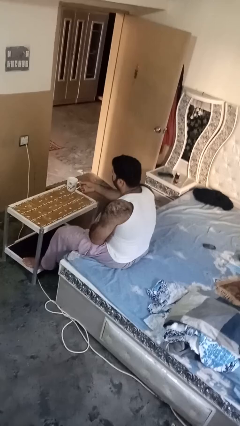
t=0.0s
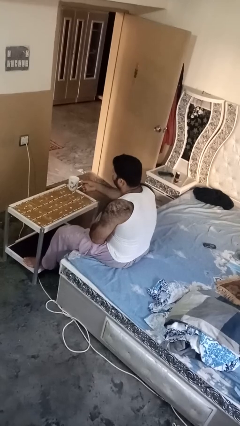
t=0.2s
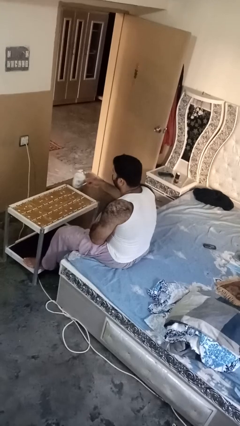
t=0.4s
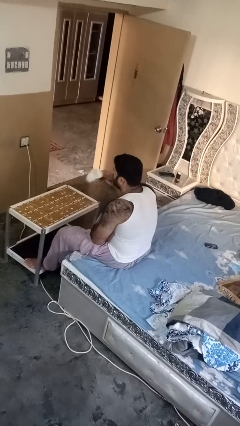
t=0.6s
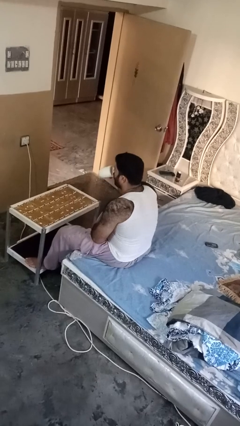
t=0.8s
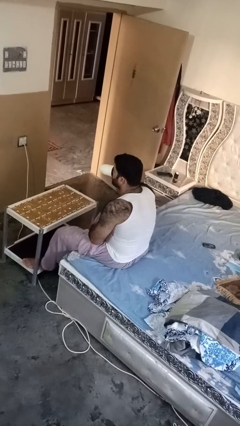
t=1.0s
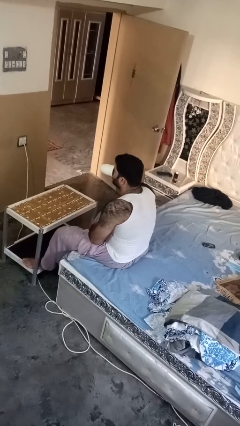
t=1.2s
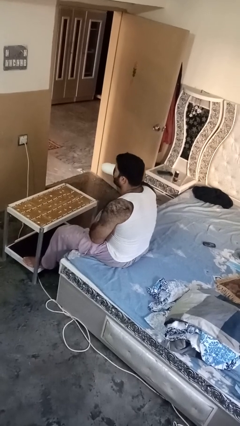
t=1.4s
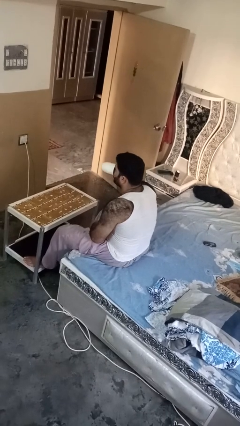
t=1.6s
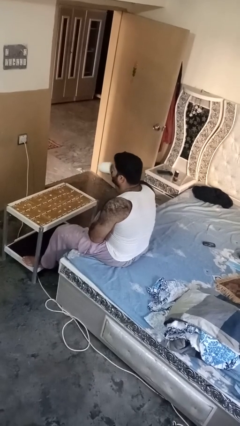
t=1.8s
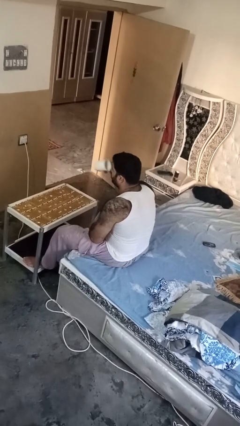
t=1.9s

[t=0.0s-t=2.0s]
person drinks from mug

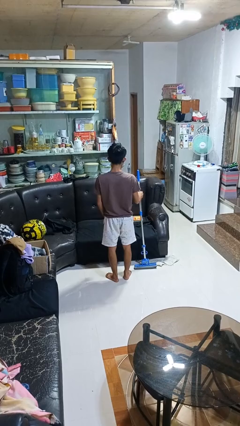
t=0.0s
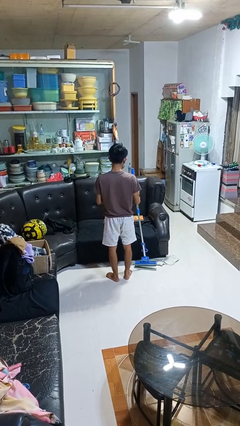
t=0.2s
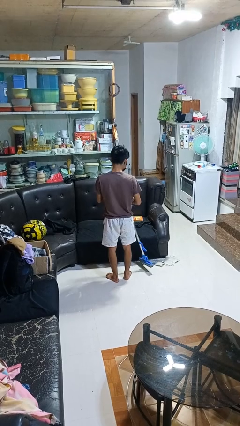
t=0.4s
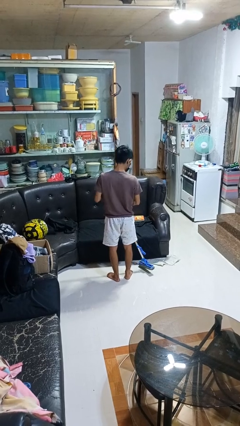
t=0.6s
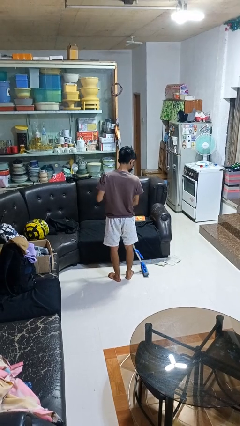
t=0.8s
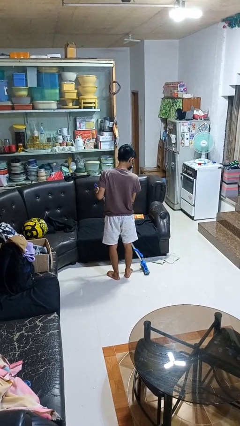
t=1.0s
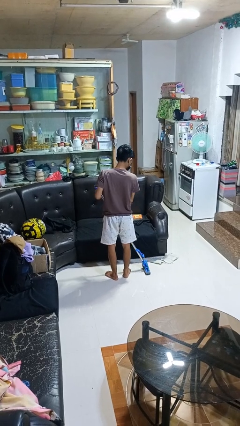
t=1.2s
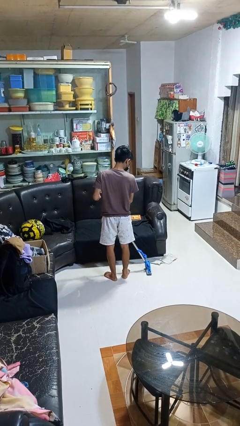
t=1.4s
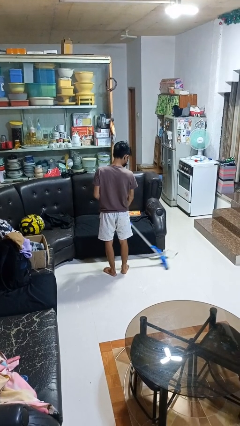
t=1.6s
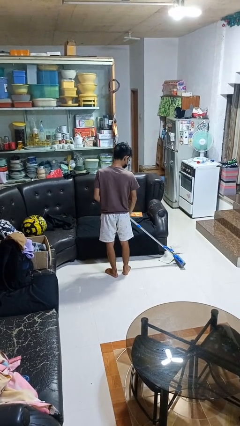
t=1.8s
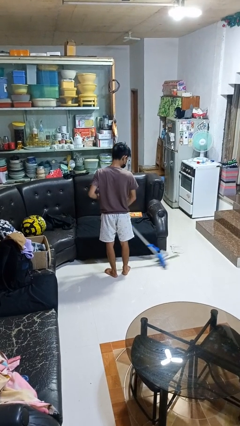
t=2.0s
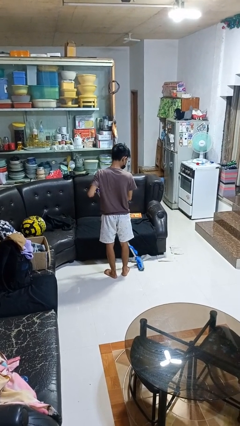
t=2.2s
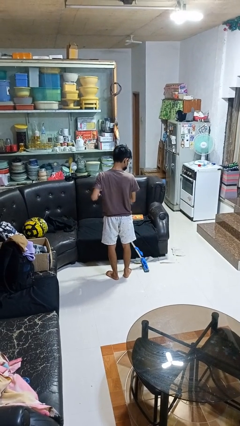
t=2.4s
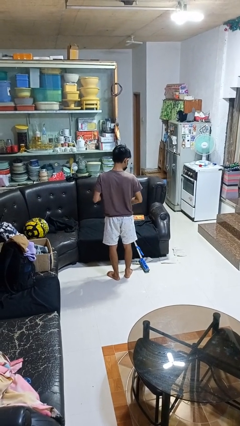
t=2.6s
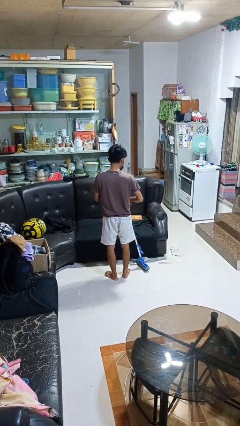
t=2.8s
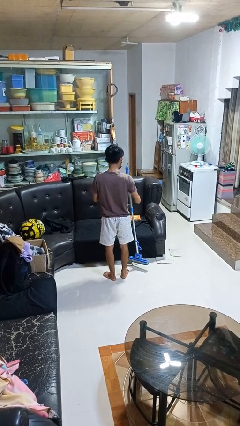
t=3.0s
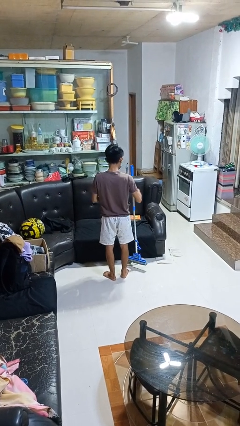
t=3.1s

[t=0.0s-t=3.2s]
person mops

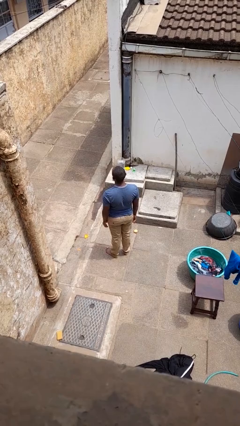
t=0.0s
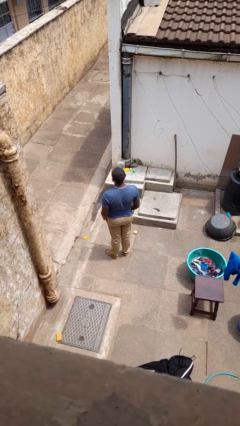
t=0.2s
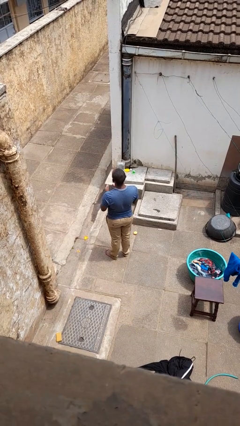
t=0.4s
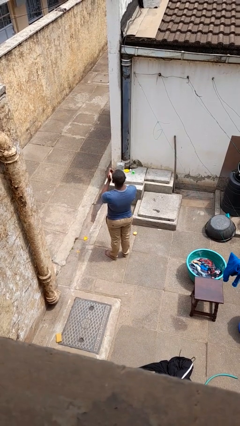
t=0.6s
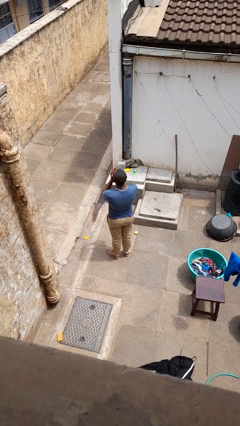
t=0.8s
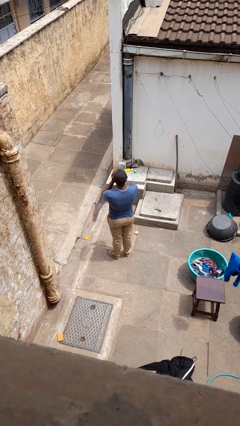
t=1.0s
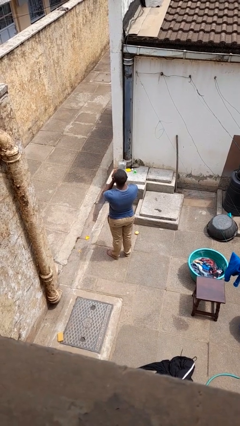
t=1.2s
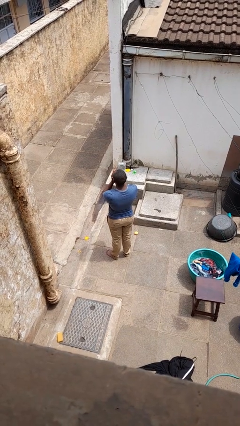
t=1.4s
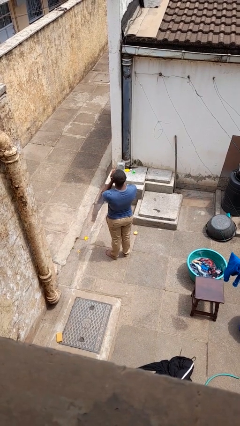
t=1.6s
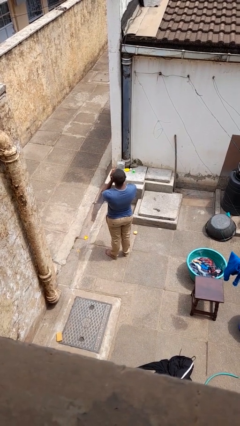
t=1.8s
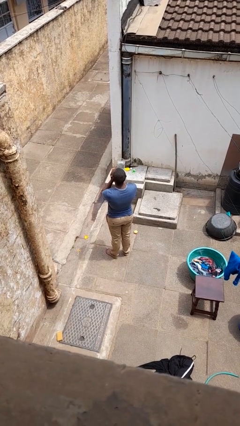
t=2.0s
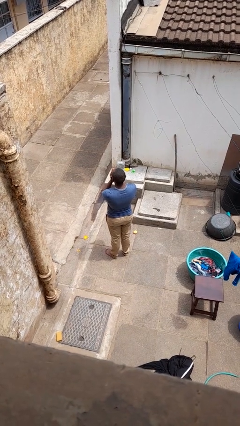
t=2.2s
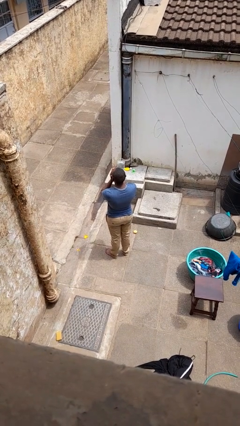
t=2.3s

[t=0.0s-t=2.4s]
person blows into hands

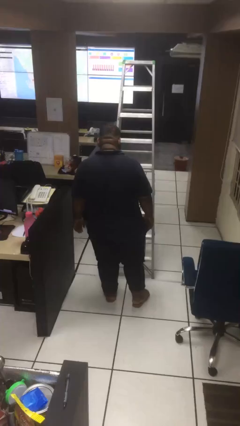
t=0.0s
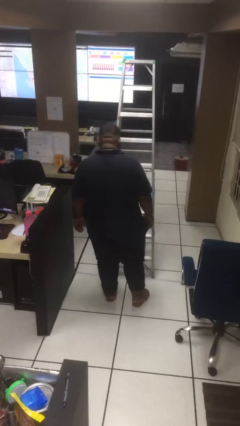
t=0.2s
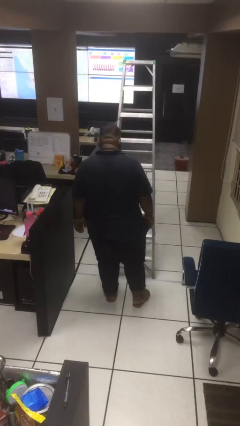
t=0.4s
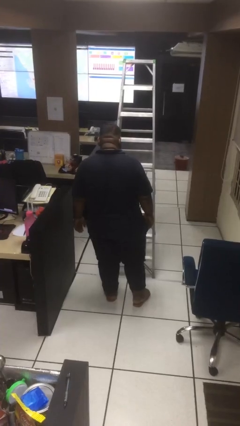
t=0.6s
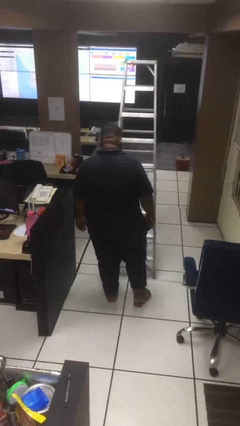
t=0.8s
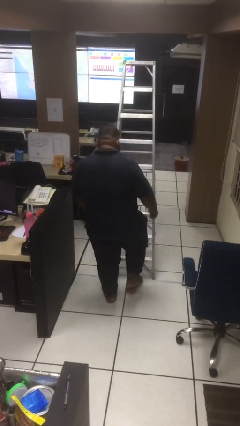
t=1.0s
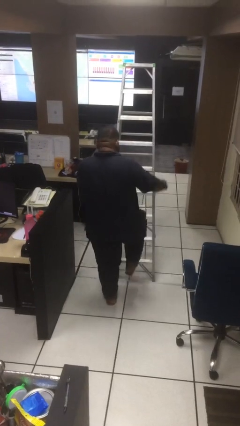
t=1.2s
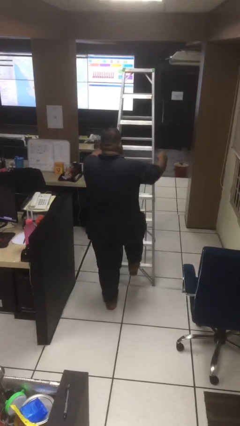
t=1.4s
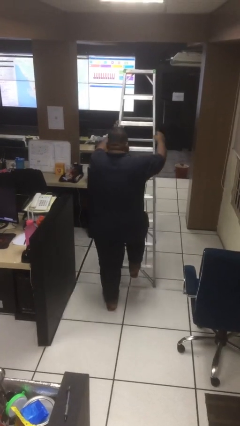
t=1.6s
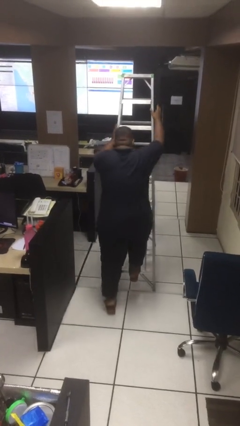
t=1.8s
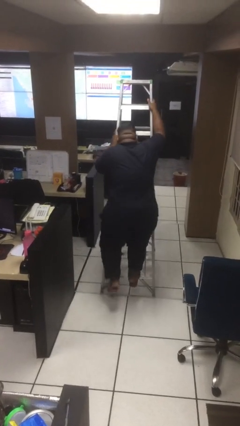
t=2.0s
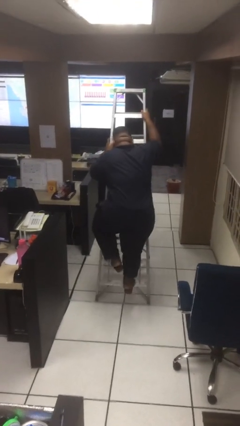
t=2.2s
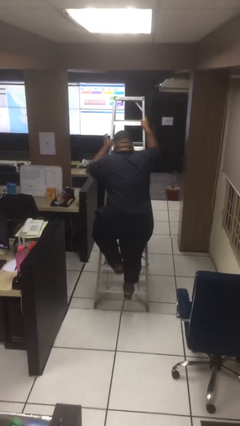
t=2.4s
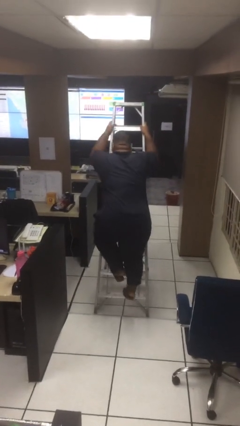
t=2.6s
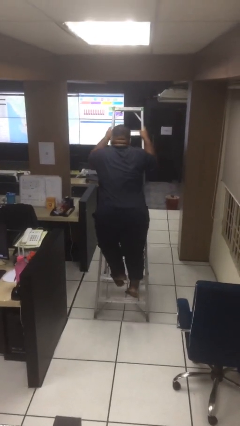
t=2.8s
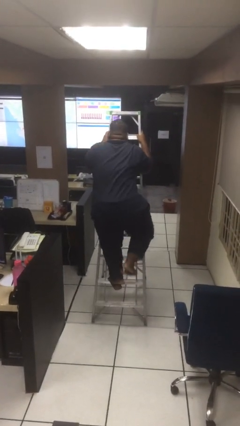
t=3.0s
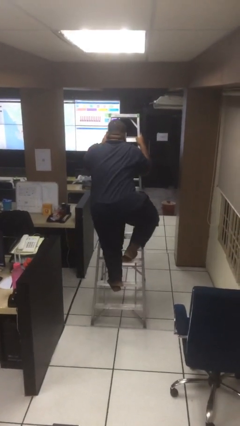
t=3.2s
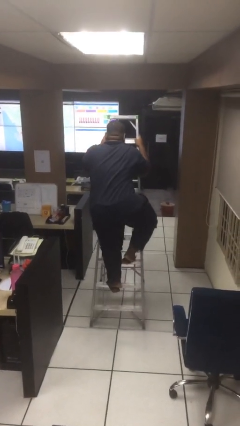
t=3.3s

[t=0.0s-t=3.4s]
person climbs up ladder

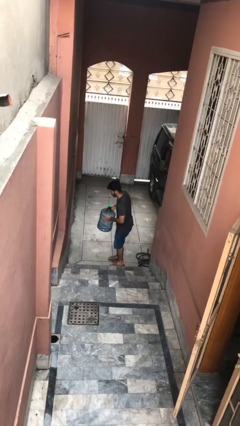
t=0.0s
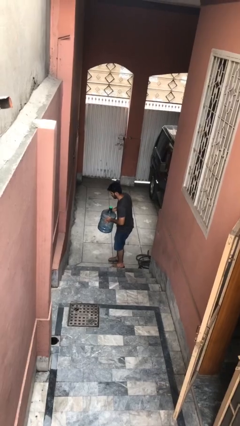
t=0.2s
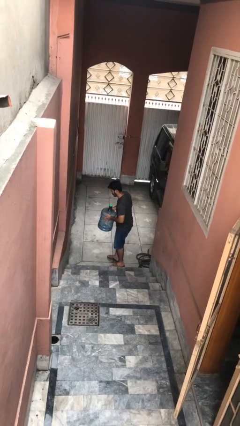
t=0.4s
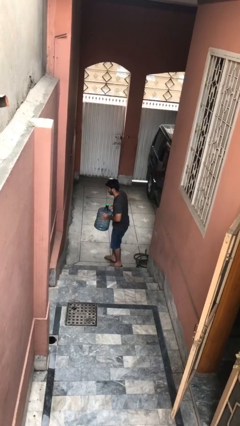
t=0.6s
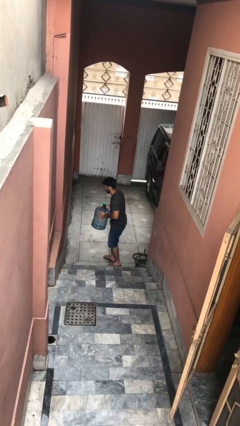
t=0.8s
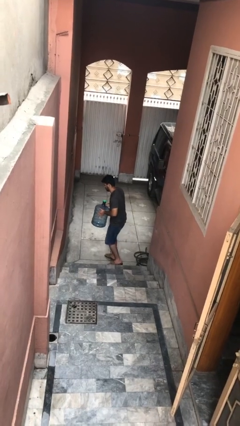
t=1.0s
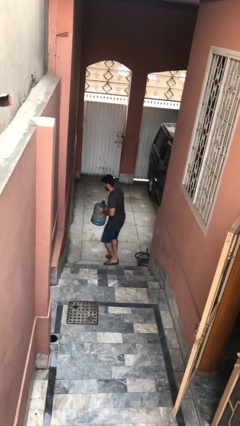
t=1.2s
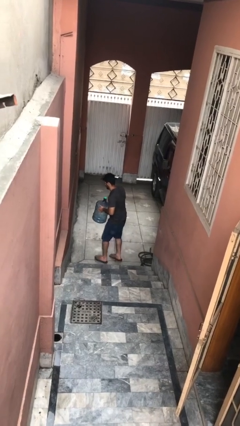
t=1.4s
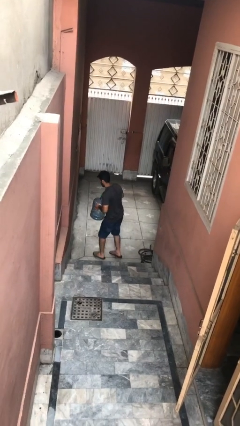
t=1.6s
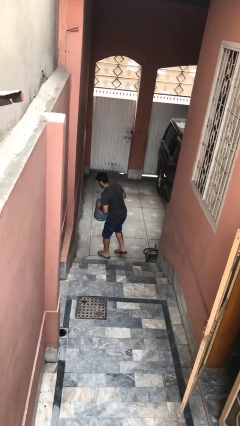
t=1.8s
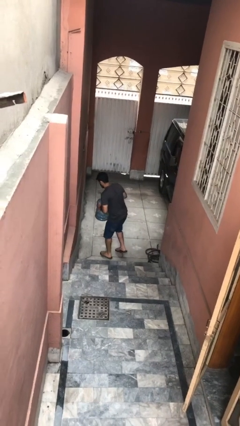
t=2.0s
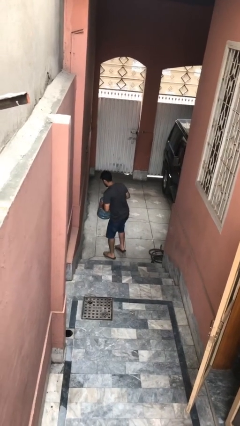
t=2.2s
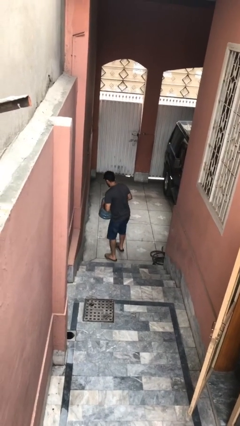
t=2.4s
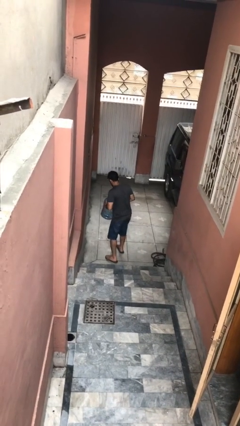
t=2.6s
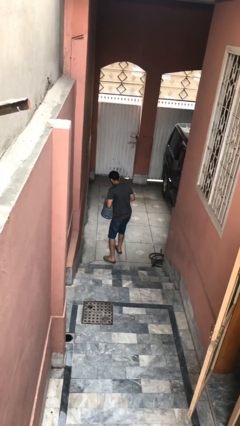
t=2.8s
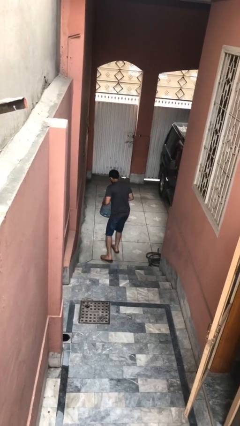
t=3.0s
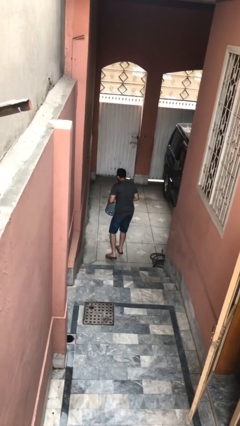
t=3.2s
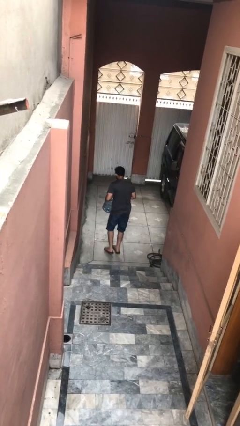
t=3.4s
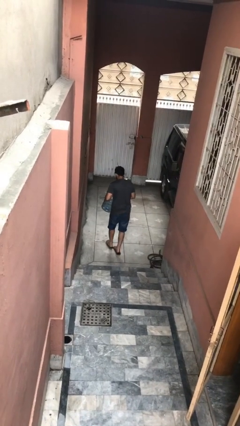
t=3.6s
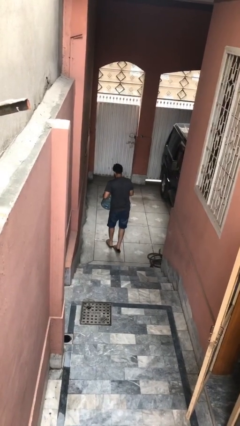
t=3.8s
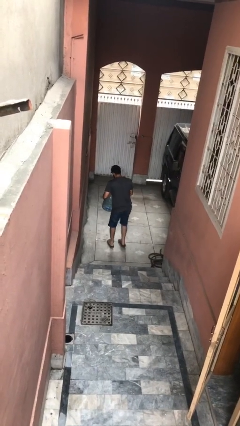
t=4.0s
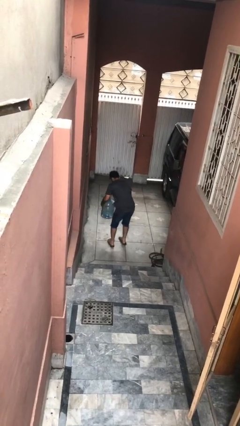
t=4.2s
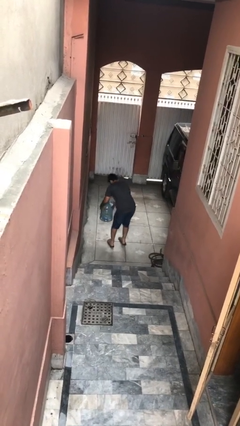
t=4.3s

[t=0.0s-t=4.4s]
person carries heavy object

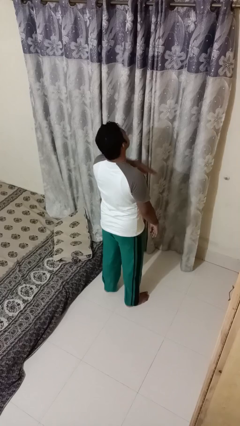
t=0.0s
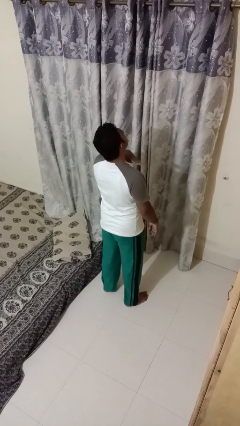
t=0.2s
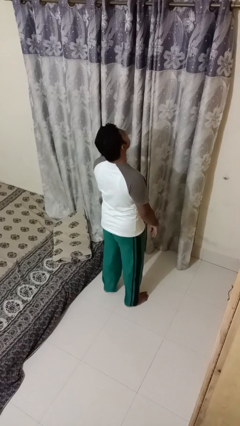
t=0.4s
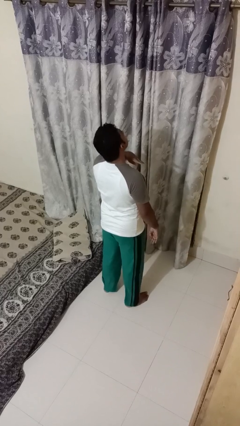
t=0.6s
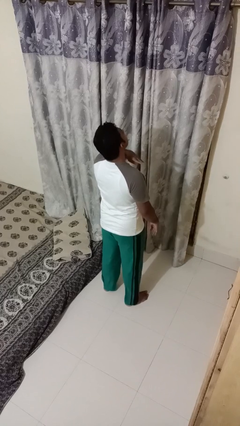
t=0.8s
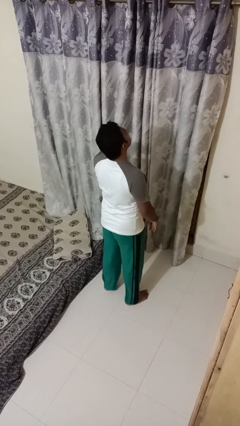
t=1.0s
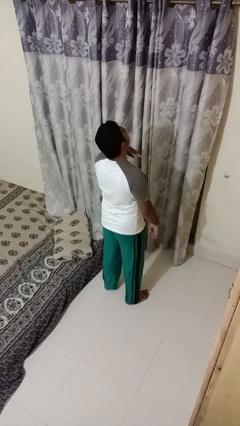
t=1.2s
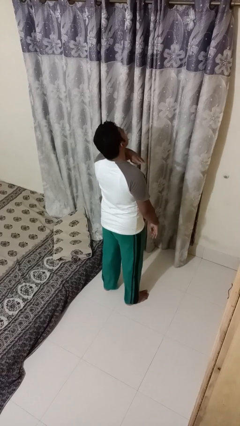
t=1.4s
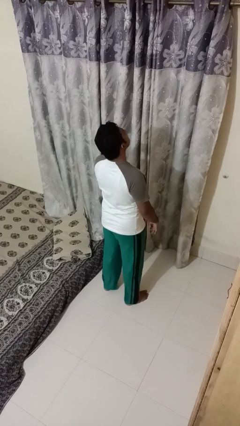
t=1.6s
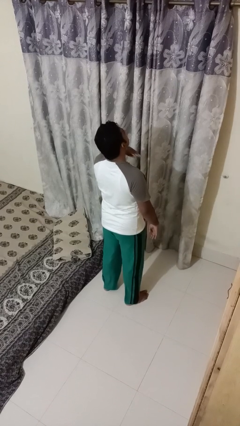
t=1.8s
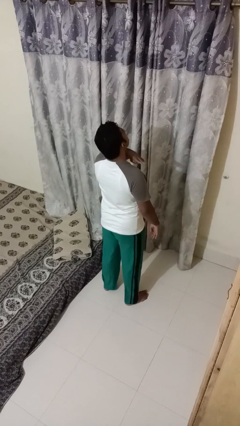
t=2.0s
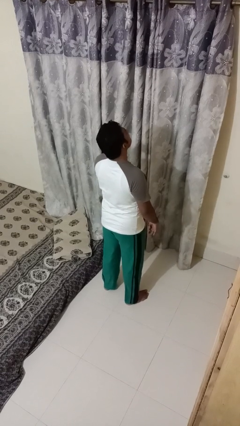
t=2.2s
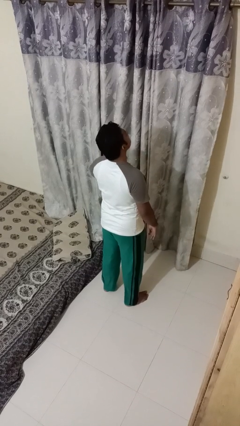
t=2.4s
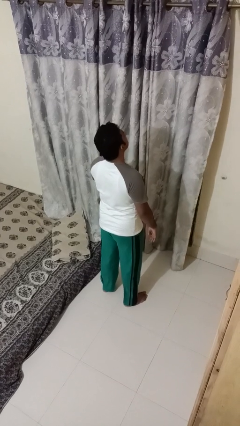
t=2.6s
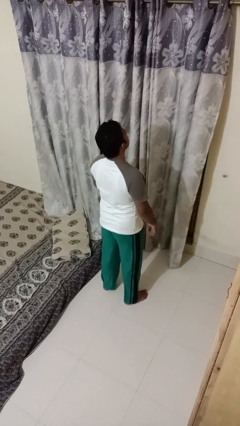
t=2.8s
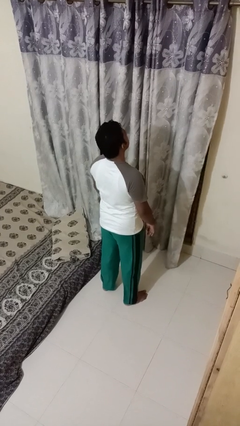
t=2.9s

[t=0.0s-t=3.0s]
person gestures cut
